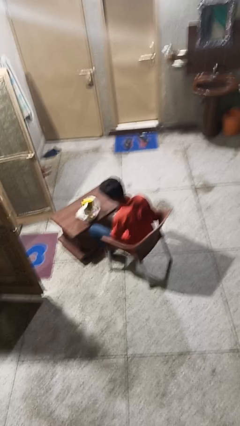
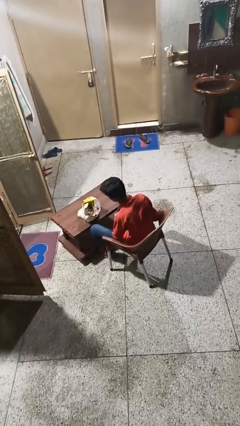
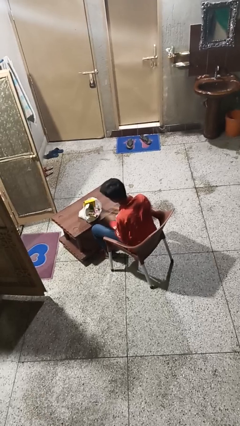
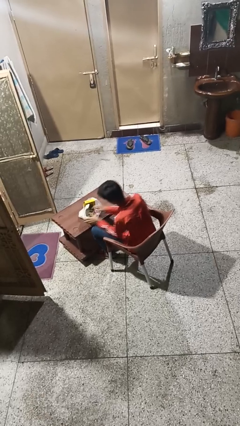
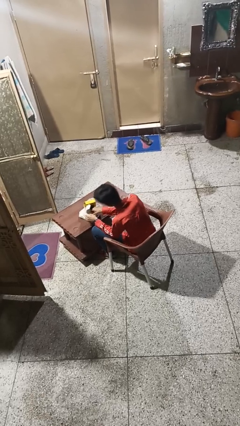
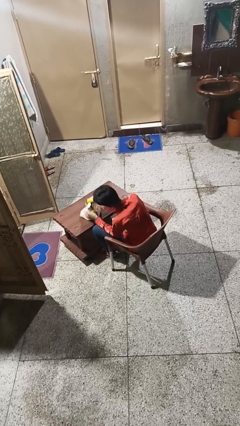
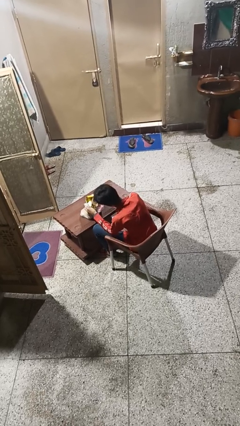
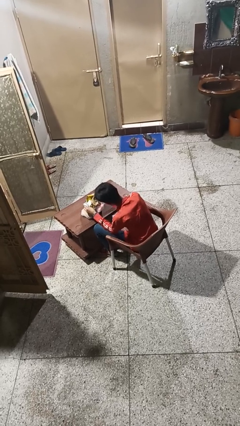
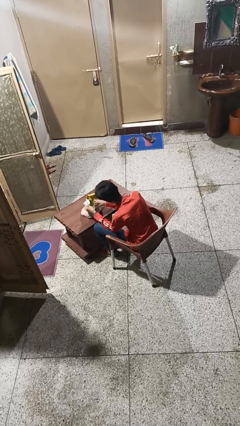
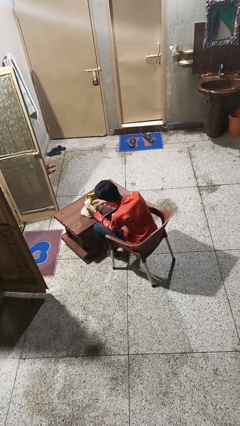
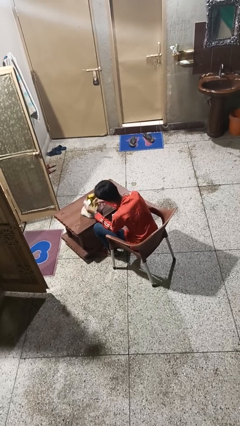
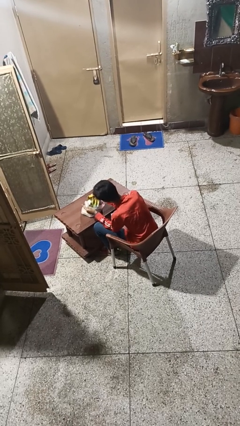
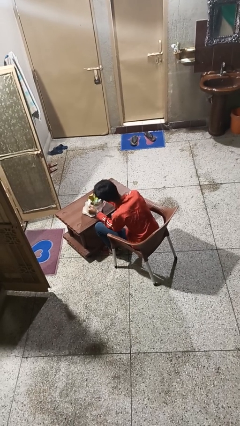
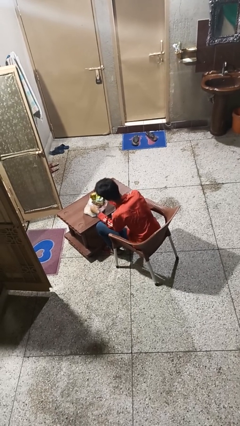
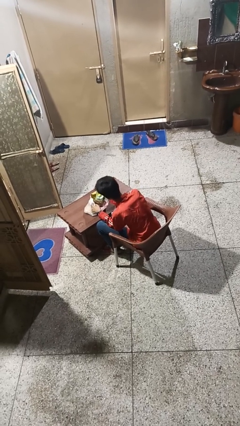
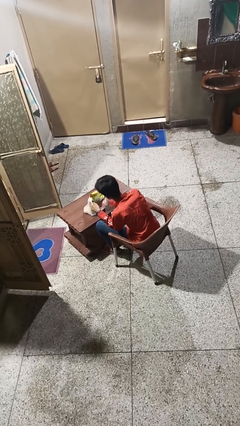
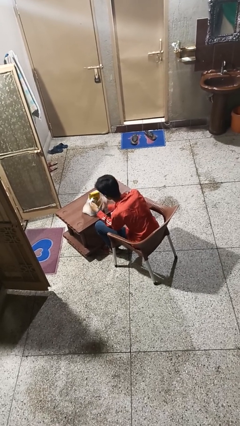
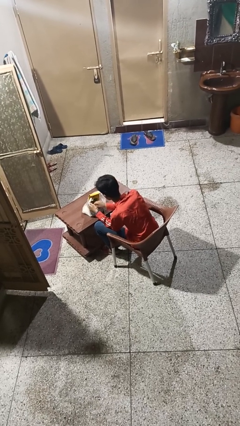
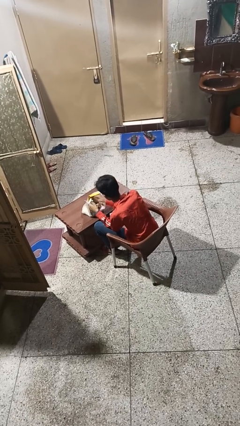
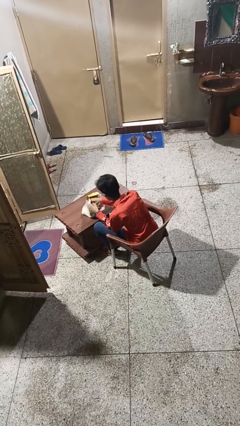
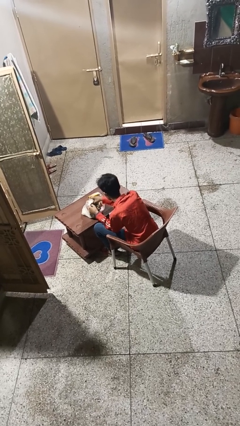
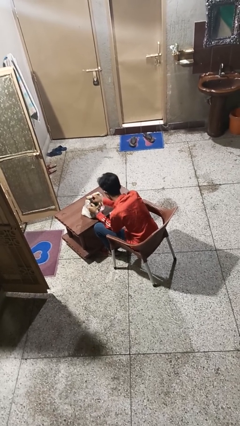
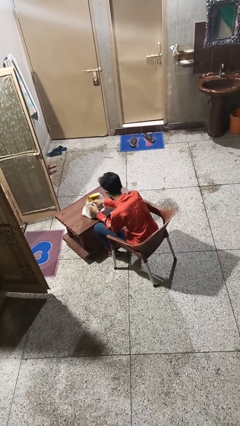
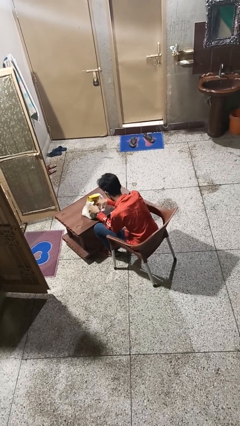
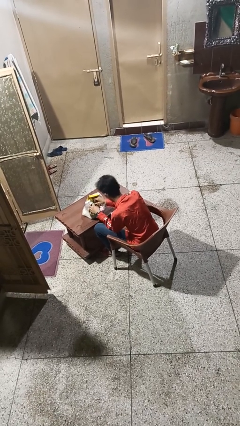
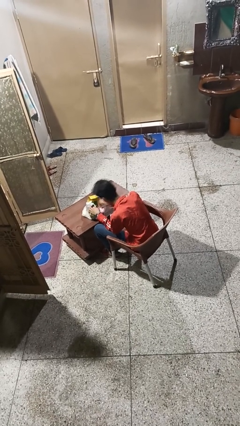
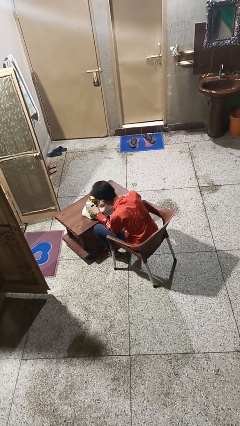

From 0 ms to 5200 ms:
person searches in bag

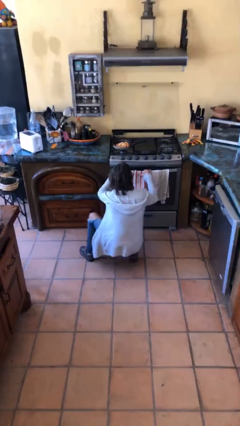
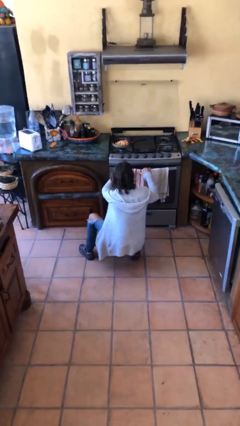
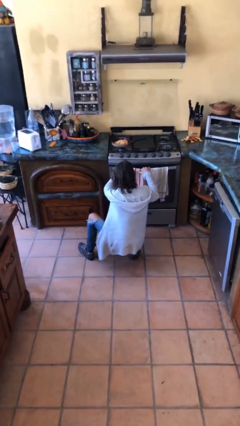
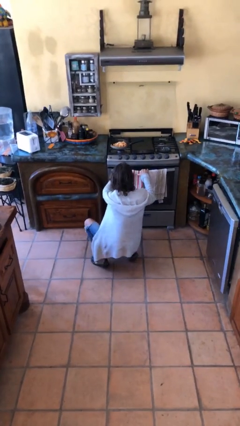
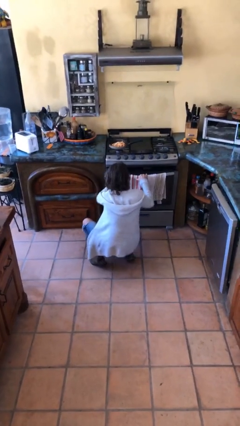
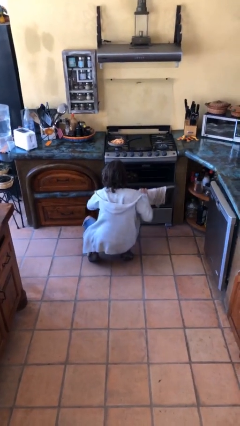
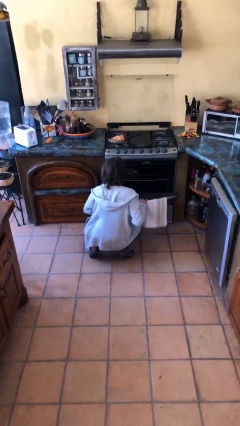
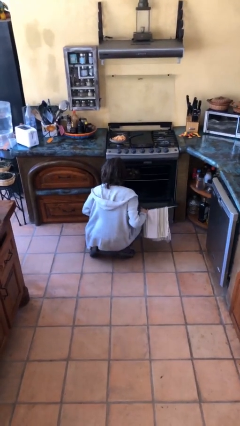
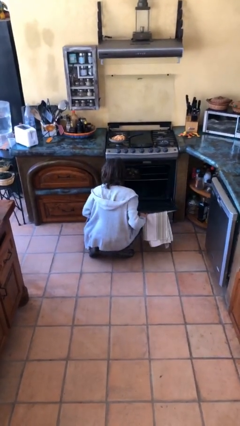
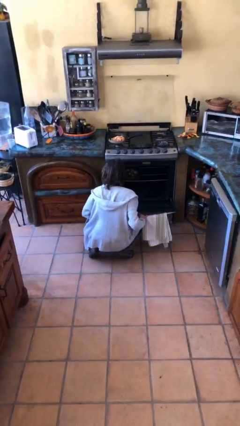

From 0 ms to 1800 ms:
person opens oven door

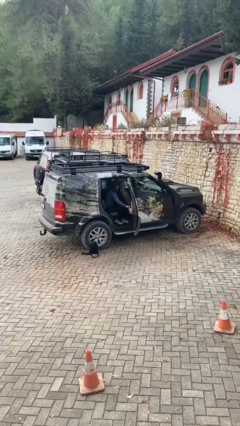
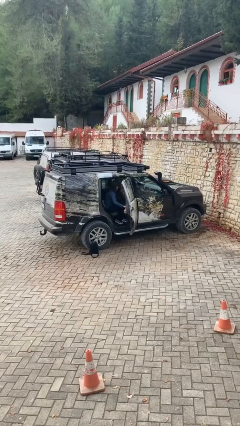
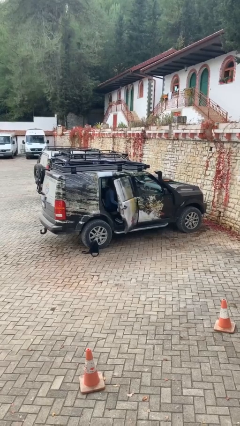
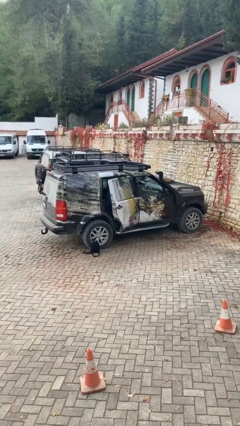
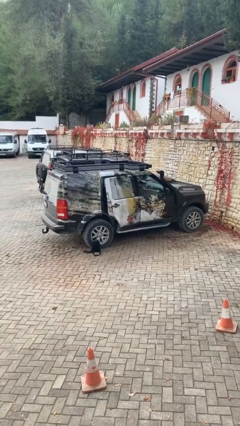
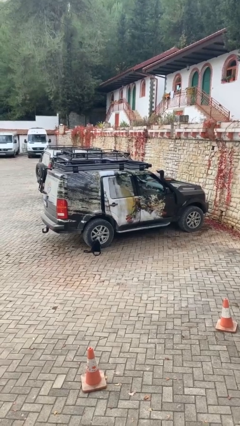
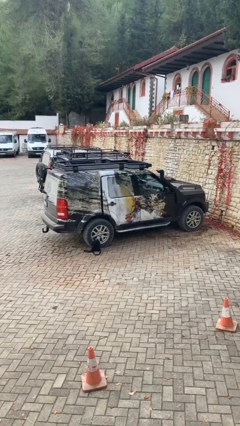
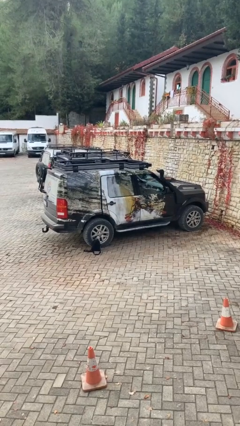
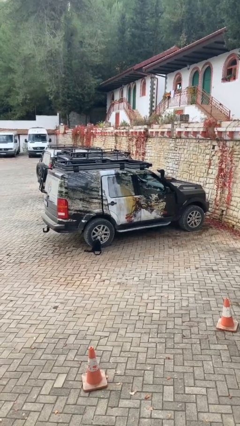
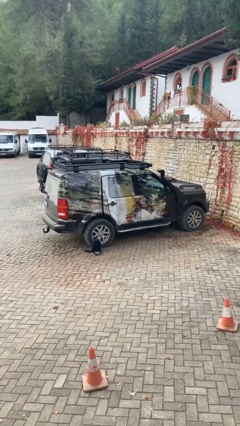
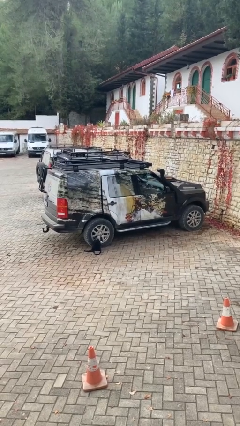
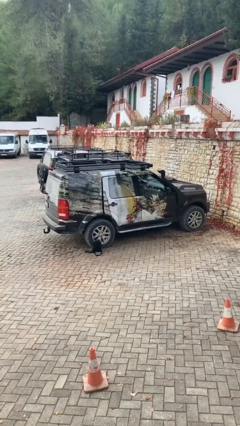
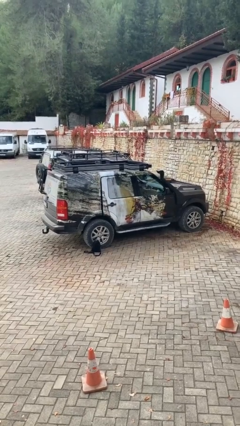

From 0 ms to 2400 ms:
person closes car door

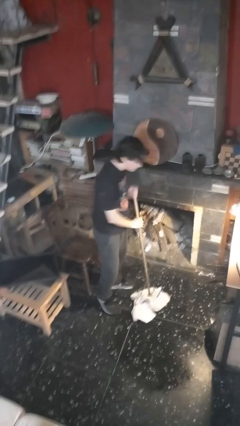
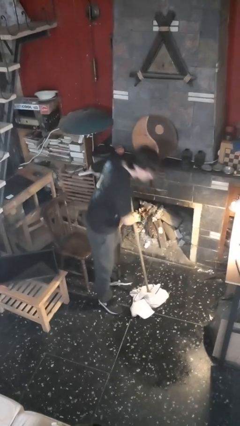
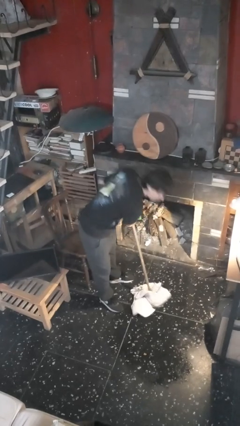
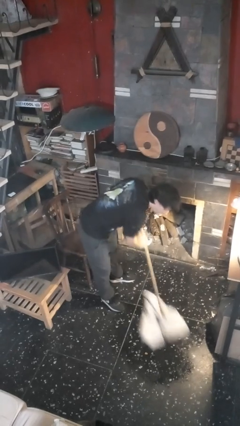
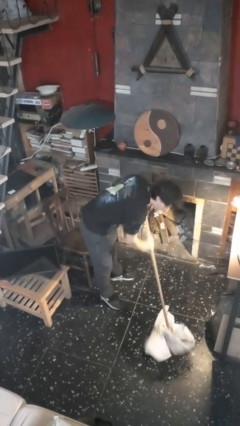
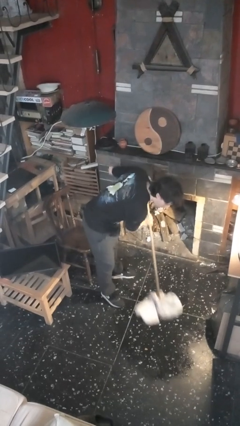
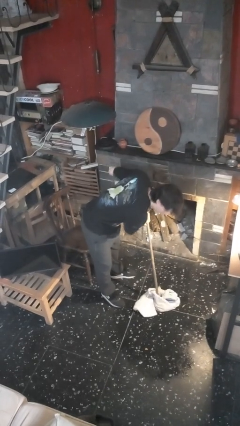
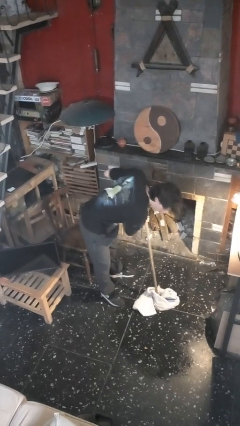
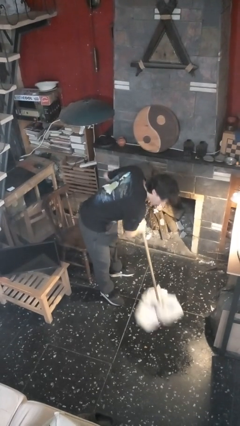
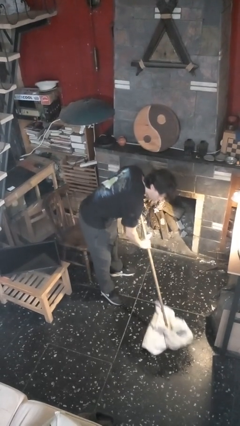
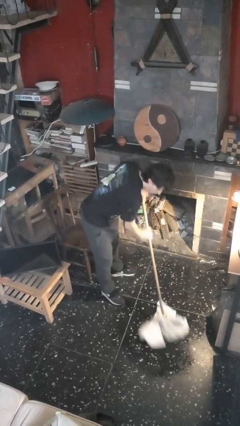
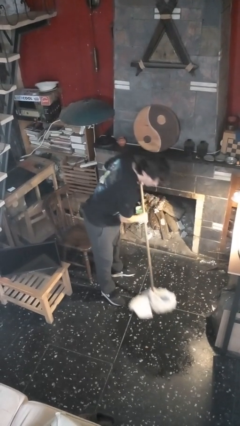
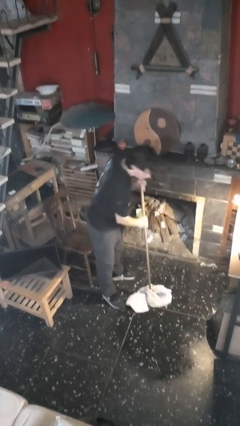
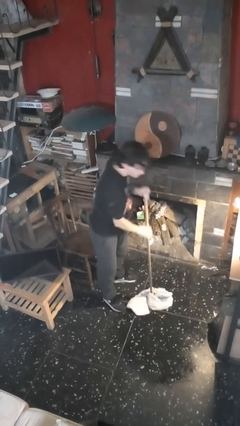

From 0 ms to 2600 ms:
person mops

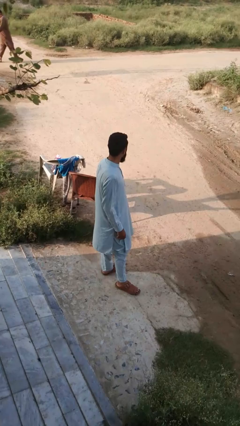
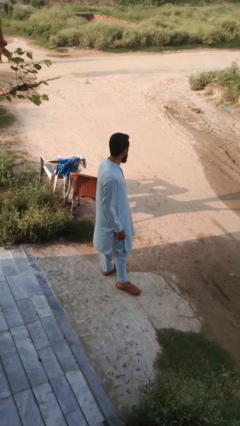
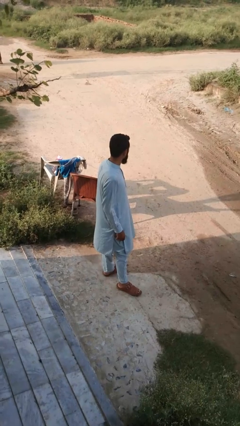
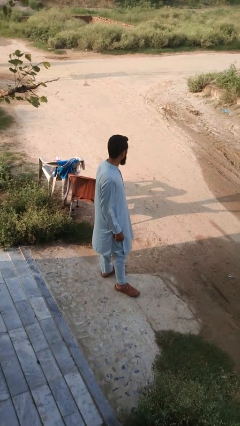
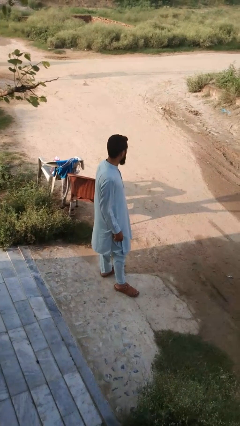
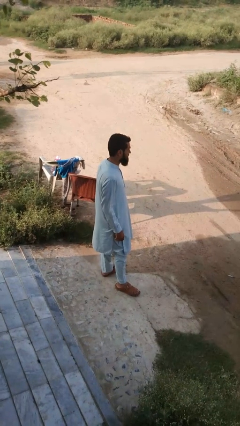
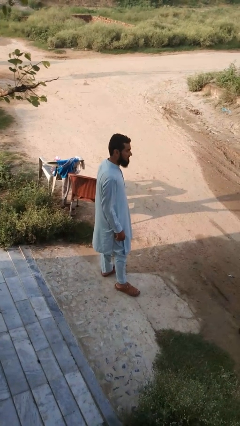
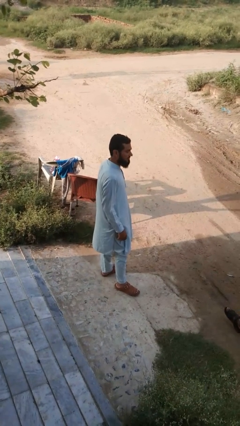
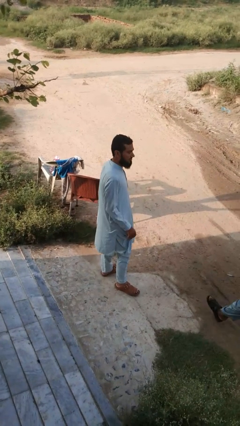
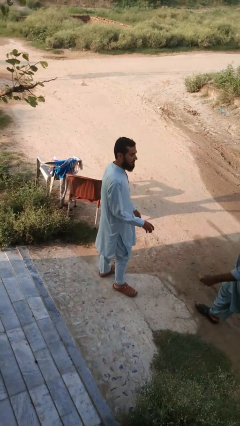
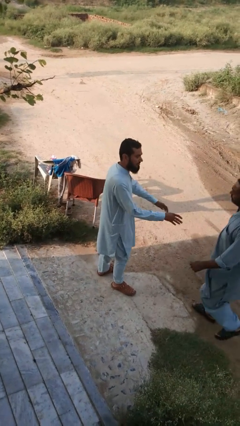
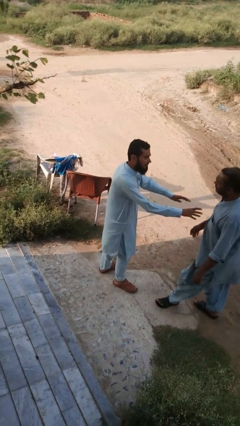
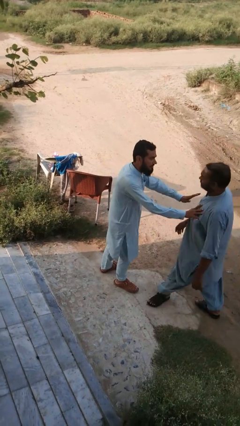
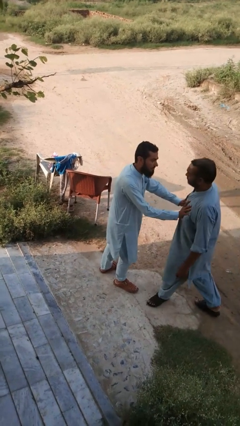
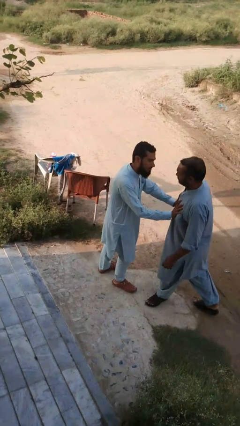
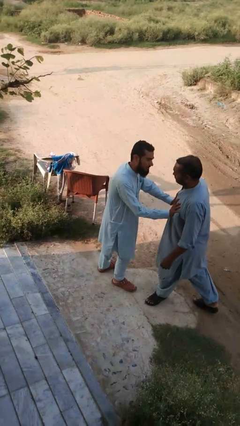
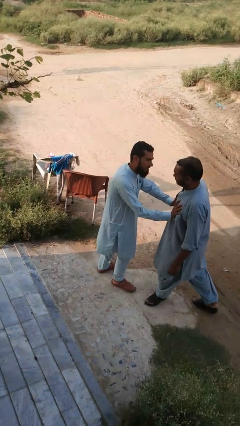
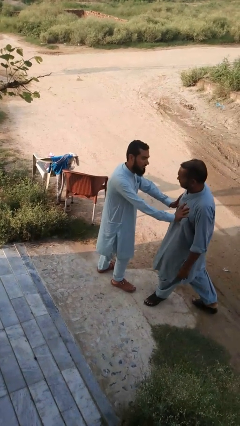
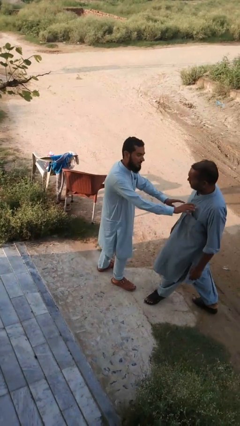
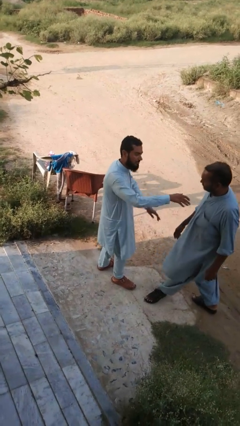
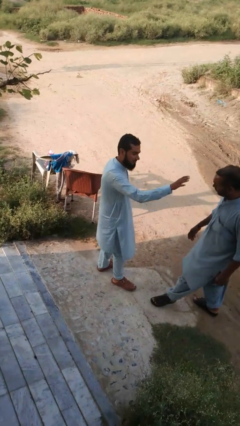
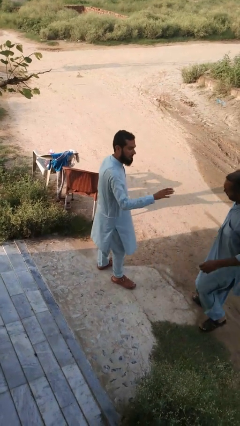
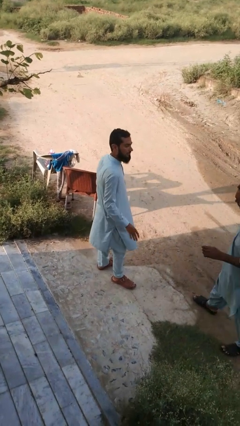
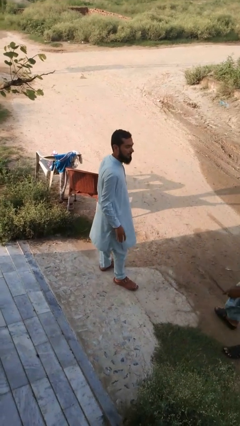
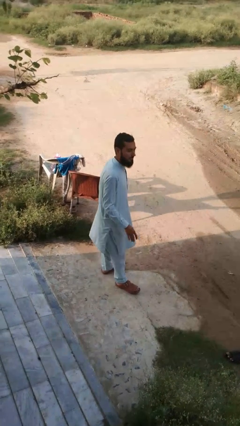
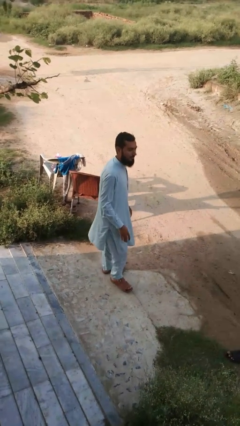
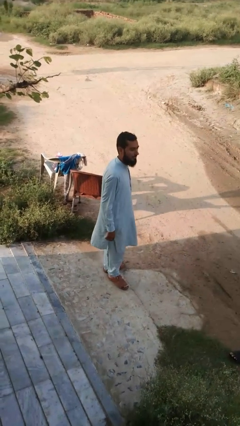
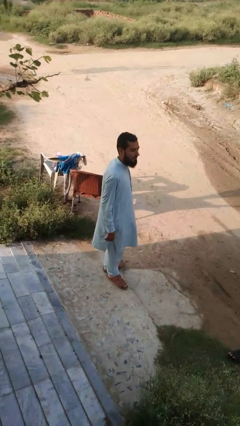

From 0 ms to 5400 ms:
person shoves person
